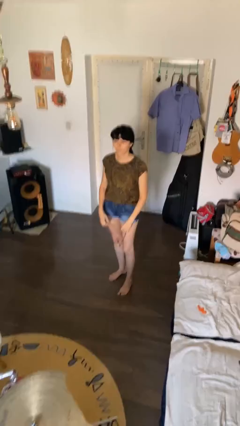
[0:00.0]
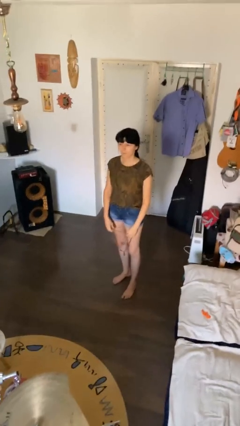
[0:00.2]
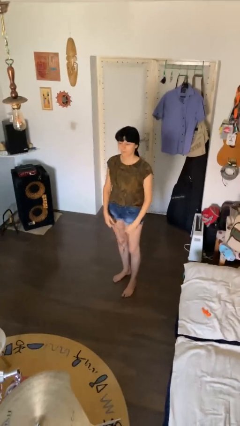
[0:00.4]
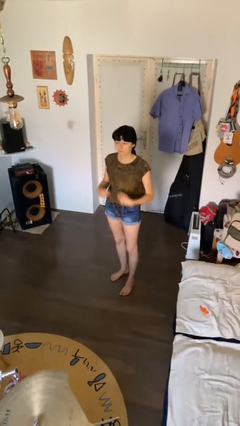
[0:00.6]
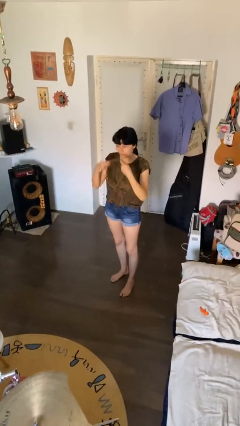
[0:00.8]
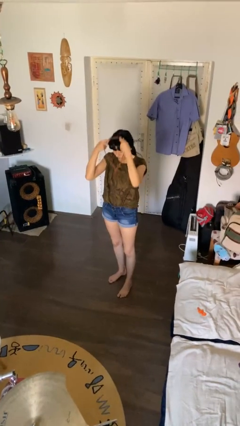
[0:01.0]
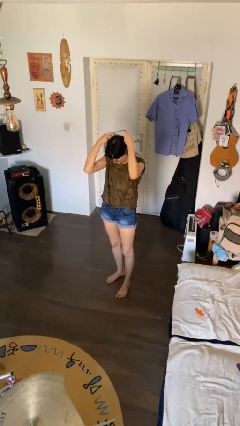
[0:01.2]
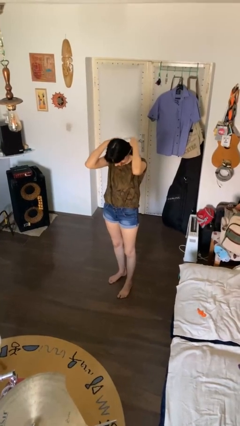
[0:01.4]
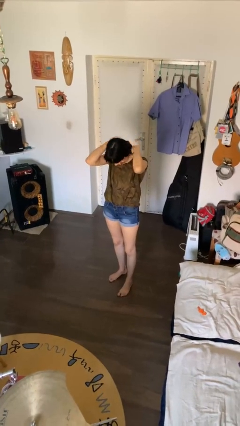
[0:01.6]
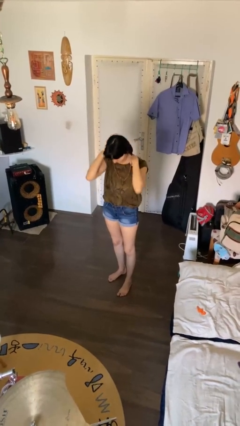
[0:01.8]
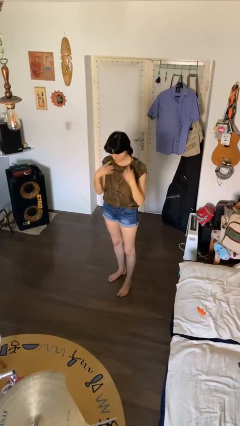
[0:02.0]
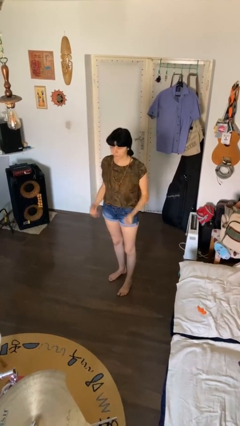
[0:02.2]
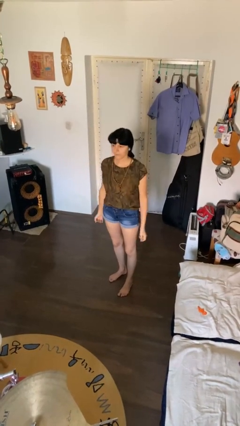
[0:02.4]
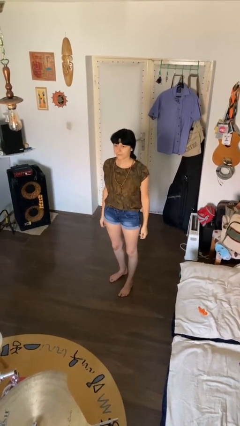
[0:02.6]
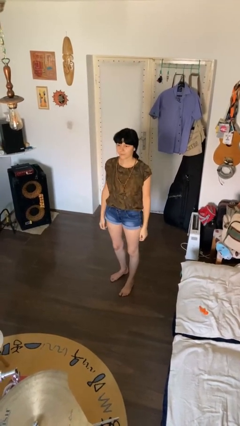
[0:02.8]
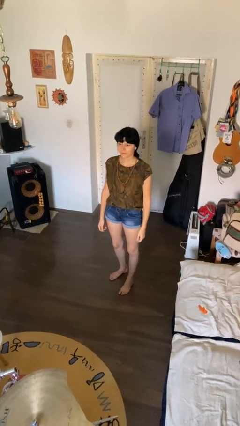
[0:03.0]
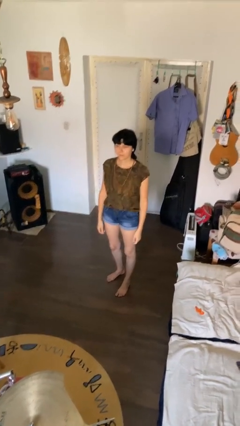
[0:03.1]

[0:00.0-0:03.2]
person puts on necklace

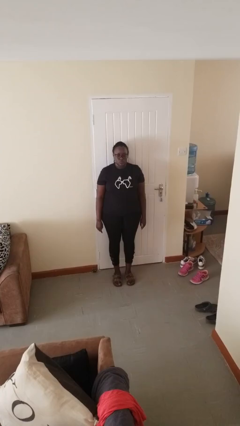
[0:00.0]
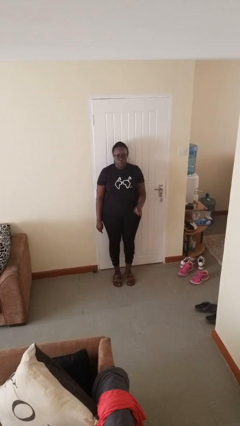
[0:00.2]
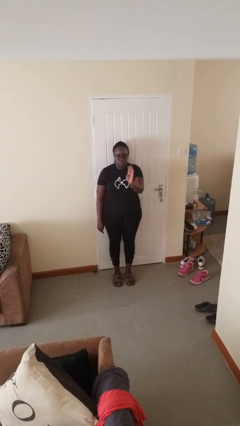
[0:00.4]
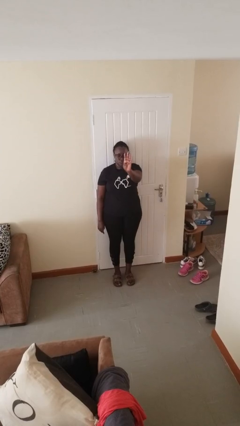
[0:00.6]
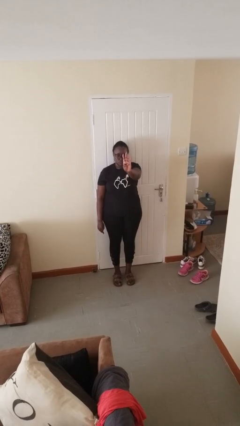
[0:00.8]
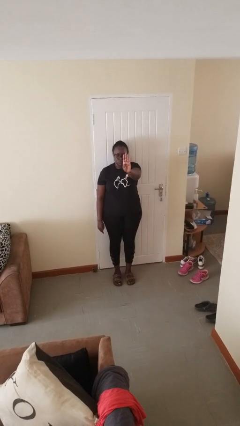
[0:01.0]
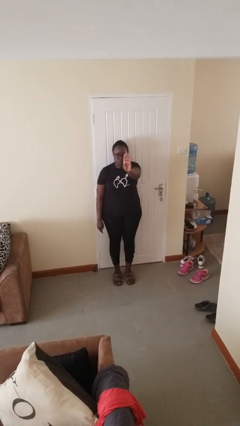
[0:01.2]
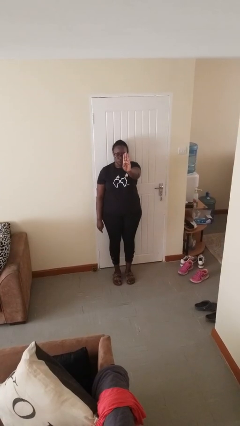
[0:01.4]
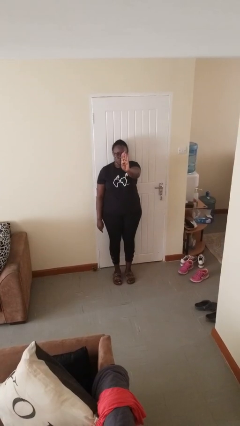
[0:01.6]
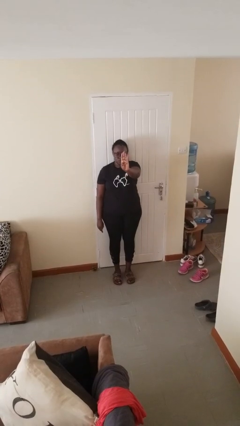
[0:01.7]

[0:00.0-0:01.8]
person gestures number four

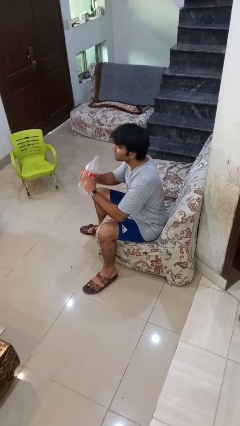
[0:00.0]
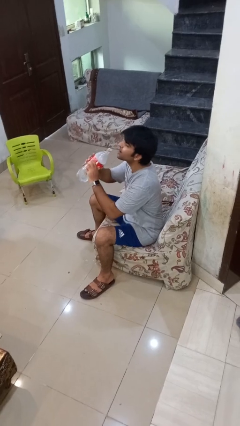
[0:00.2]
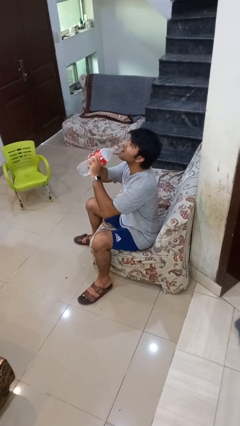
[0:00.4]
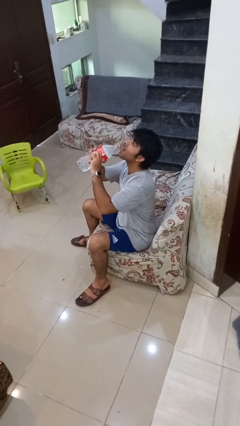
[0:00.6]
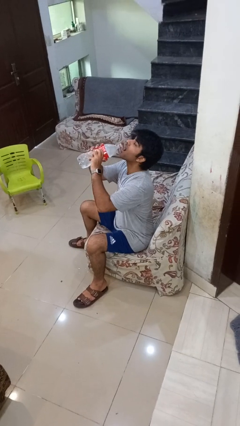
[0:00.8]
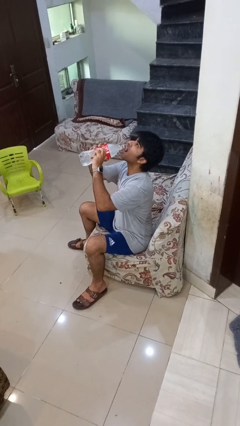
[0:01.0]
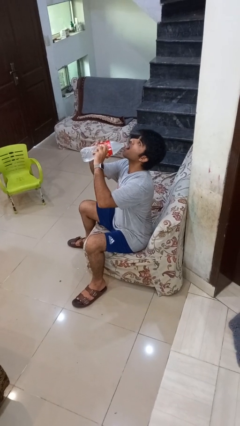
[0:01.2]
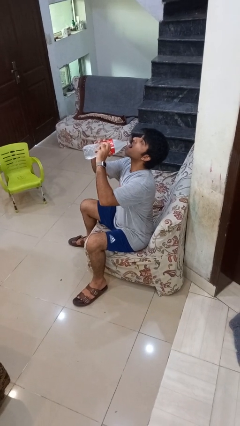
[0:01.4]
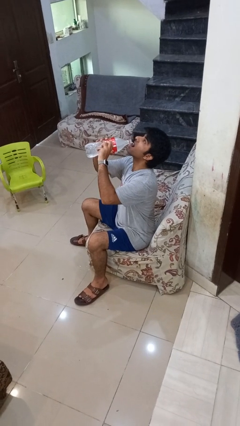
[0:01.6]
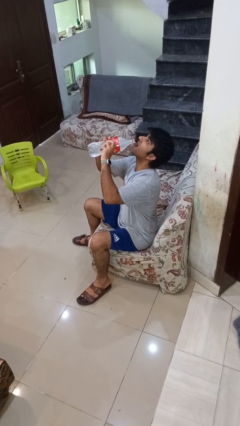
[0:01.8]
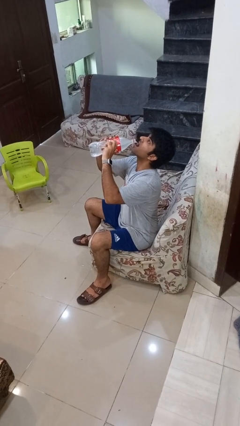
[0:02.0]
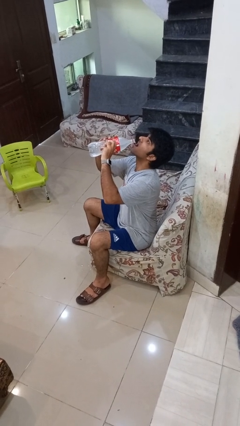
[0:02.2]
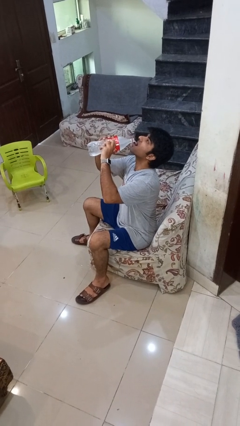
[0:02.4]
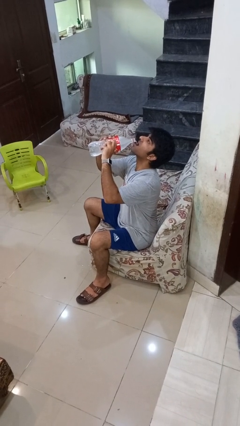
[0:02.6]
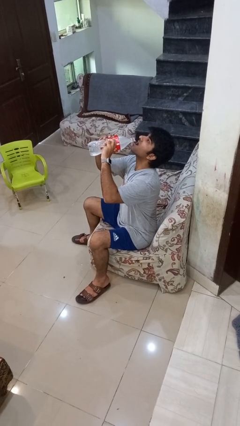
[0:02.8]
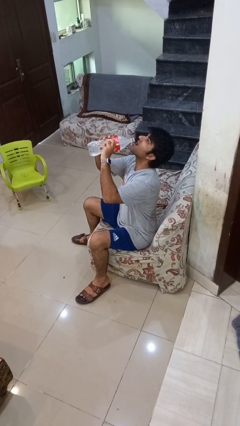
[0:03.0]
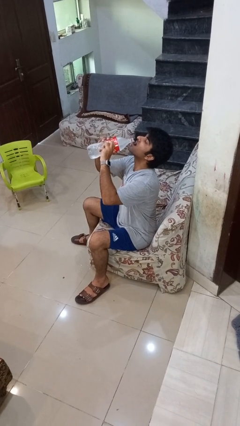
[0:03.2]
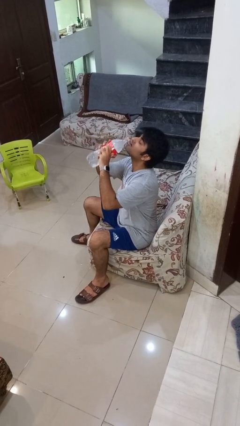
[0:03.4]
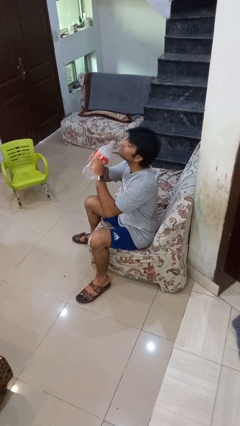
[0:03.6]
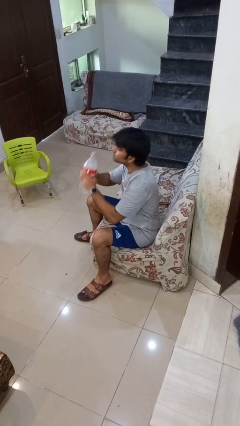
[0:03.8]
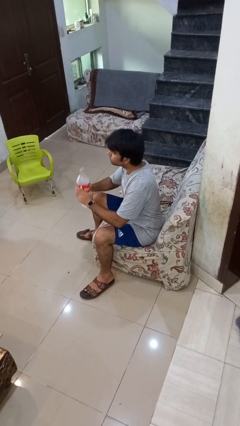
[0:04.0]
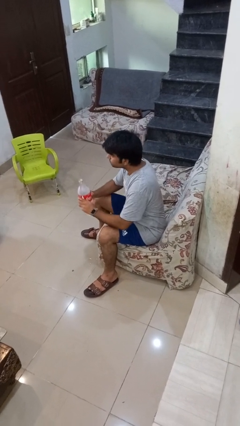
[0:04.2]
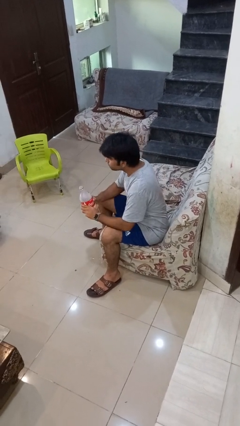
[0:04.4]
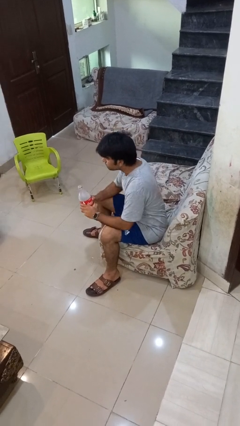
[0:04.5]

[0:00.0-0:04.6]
person drinks from bottle

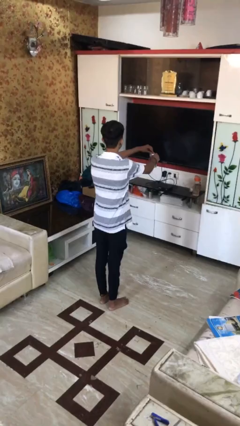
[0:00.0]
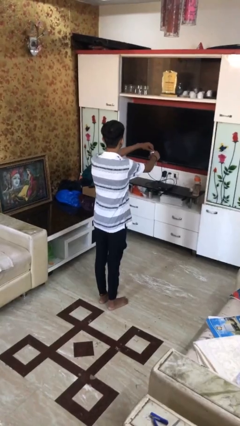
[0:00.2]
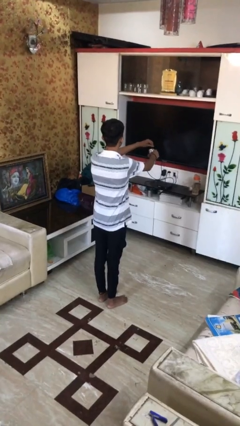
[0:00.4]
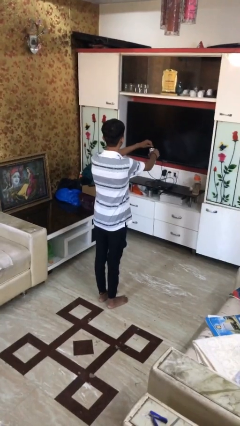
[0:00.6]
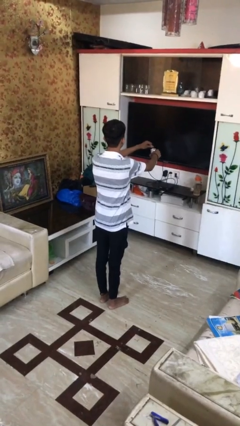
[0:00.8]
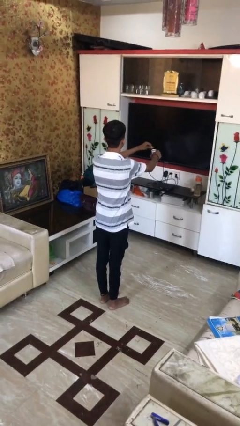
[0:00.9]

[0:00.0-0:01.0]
person opens beverage can

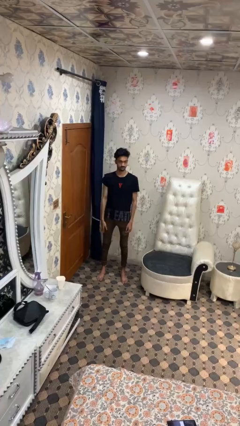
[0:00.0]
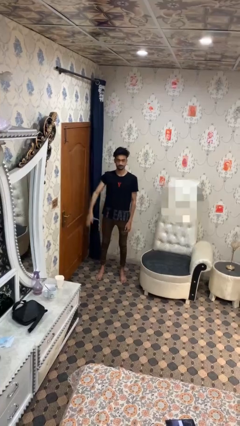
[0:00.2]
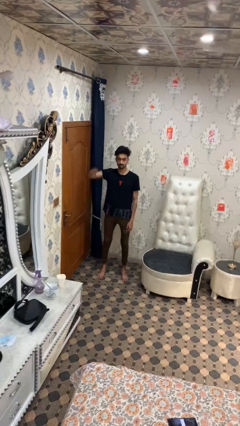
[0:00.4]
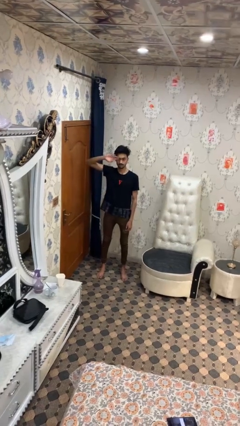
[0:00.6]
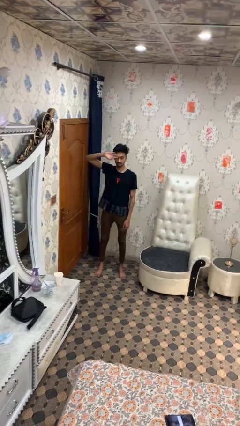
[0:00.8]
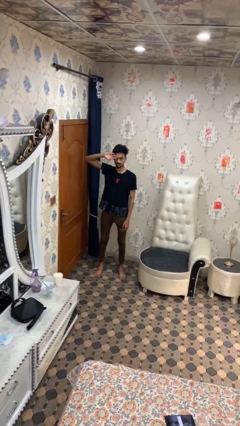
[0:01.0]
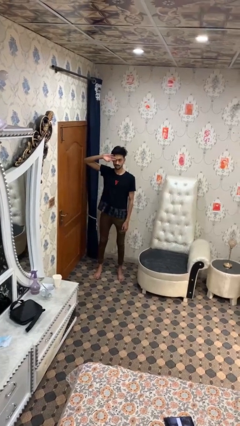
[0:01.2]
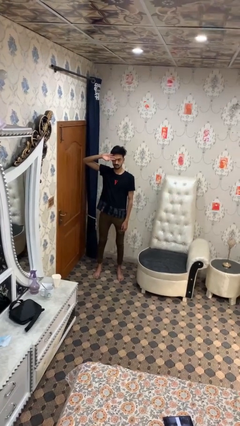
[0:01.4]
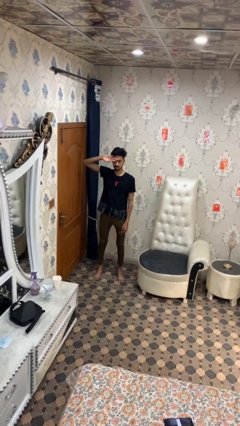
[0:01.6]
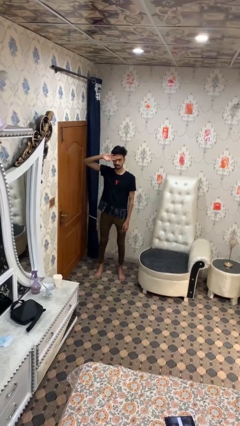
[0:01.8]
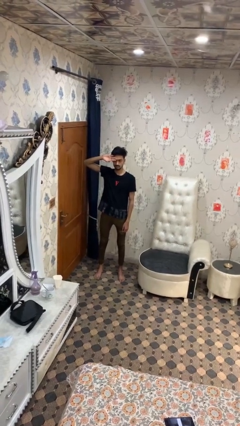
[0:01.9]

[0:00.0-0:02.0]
person salutes

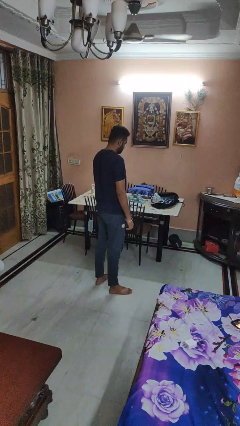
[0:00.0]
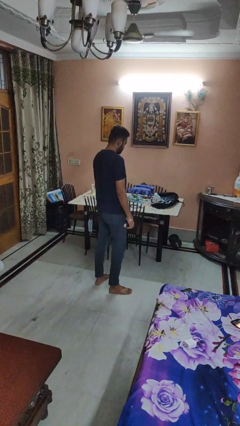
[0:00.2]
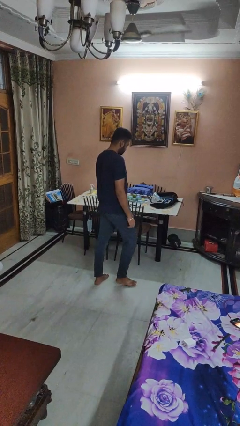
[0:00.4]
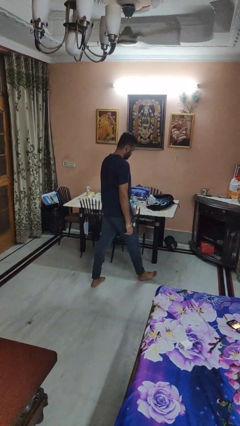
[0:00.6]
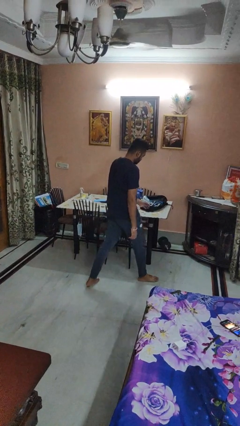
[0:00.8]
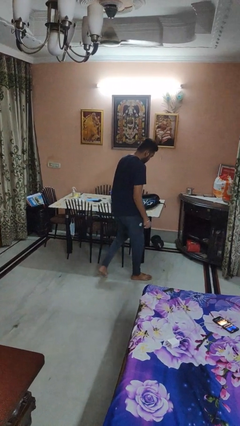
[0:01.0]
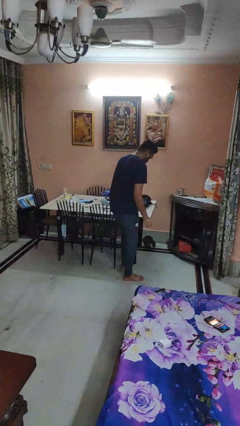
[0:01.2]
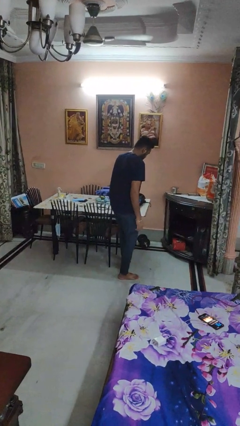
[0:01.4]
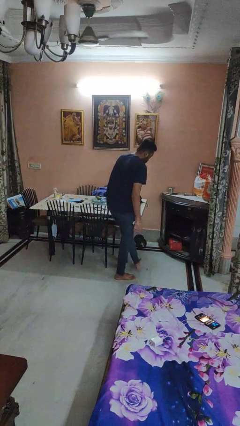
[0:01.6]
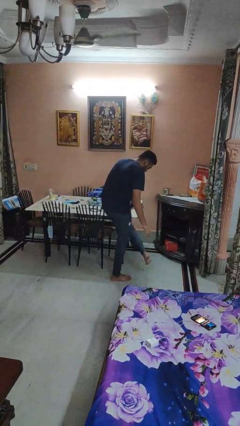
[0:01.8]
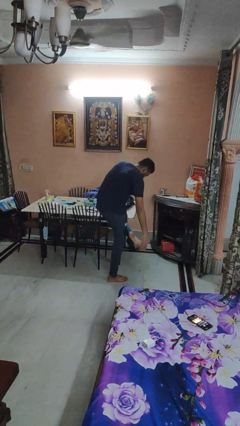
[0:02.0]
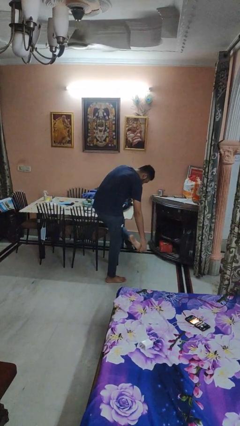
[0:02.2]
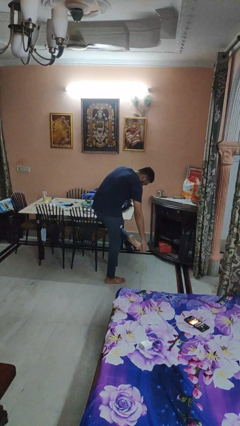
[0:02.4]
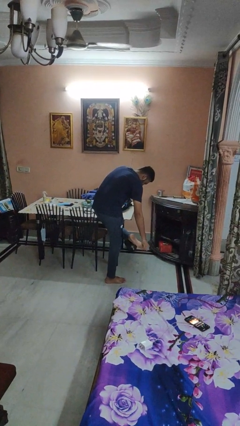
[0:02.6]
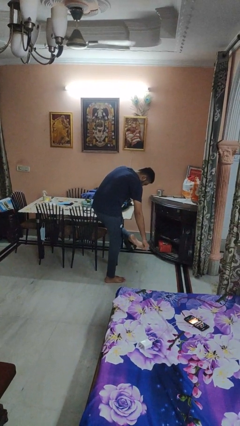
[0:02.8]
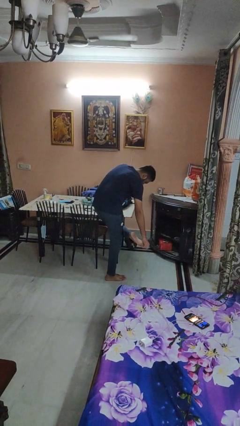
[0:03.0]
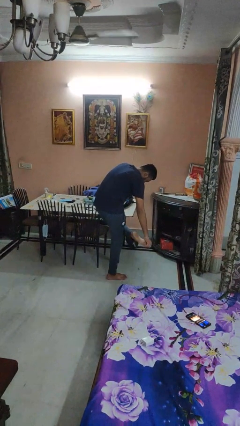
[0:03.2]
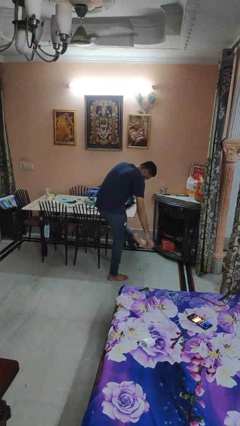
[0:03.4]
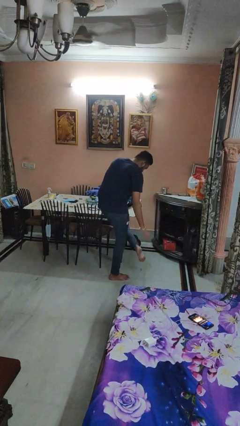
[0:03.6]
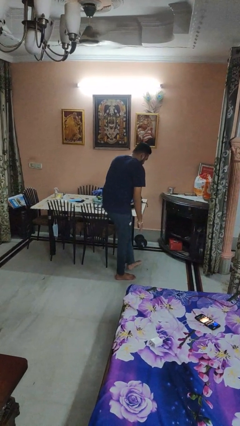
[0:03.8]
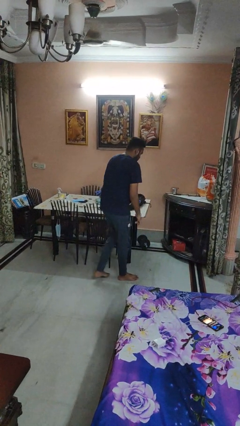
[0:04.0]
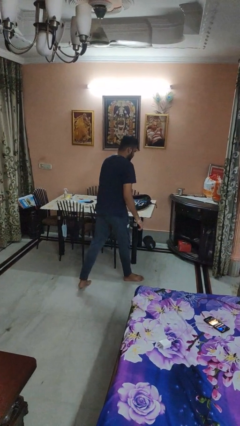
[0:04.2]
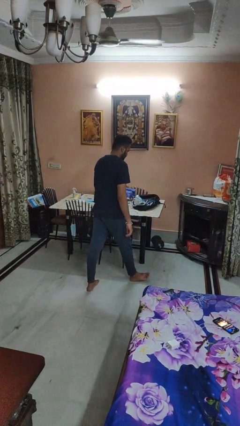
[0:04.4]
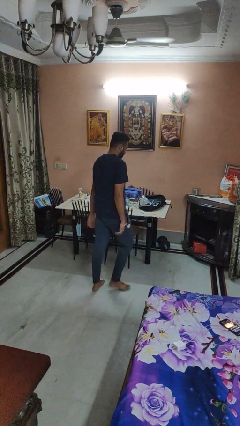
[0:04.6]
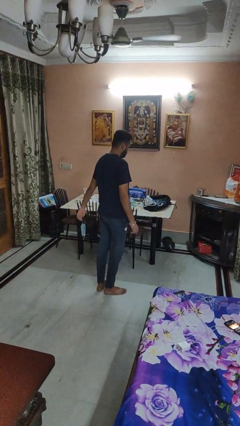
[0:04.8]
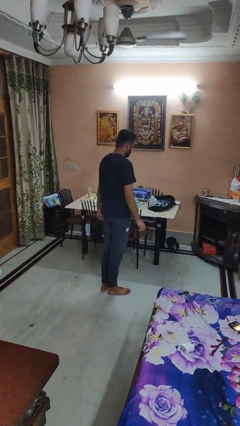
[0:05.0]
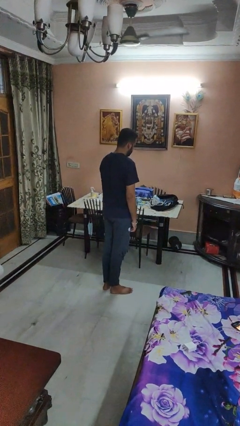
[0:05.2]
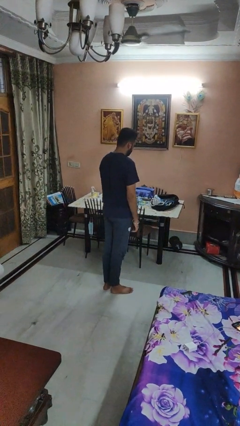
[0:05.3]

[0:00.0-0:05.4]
person bumps into table
